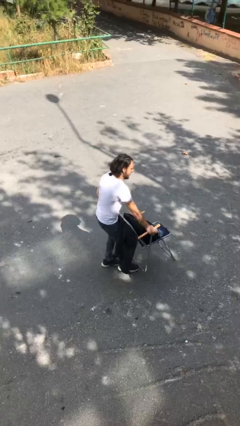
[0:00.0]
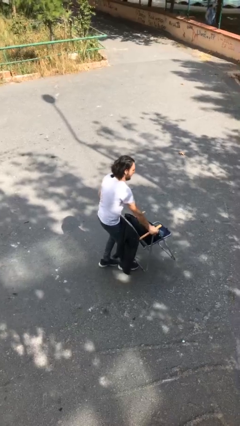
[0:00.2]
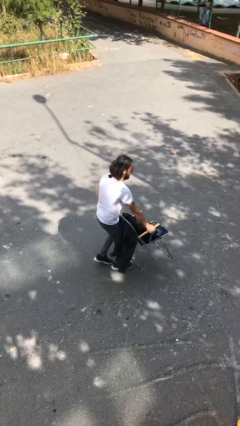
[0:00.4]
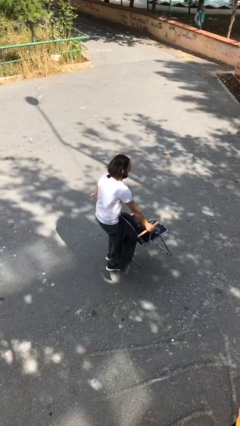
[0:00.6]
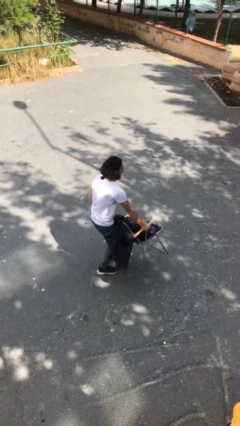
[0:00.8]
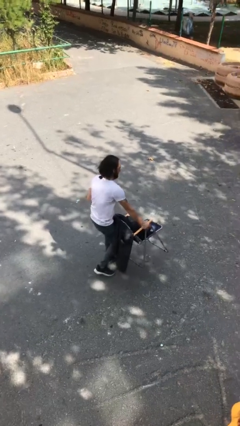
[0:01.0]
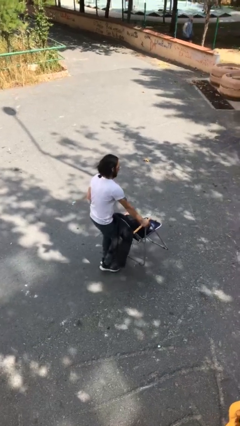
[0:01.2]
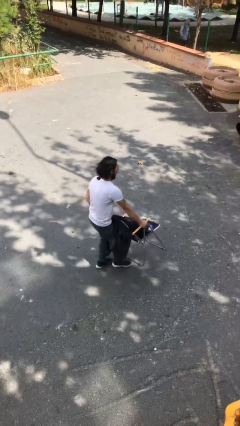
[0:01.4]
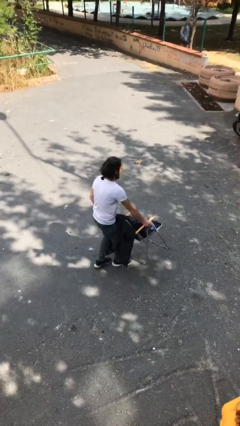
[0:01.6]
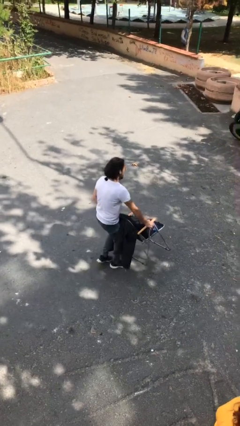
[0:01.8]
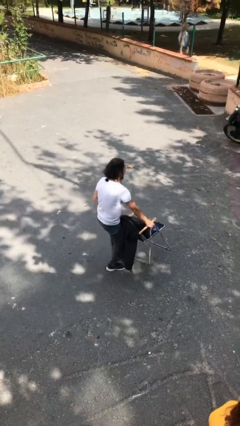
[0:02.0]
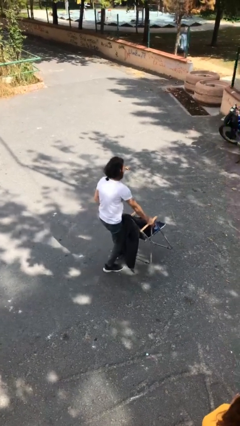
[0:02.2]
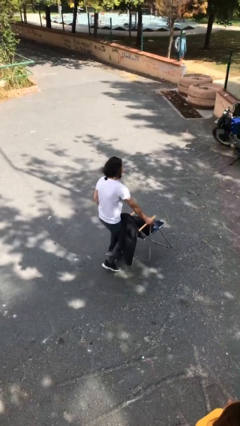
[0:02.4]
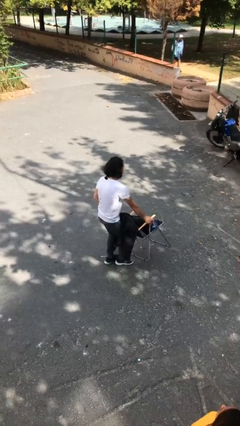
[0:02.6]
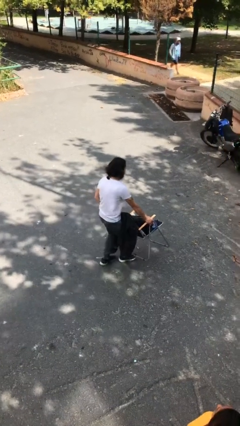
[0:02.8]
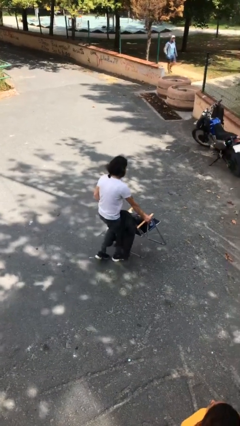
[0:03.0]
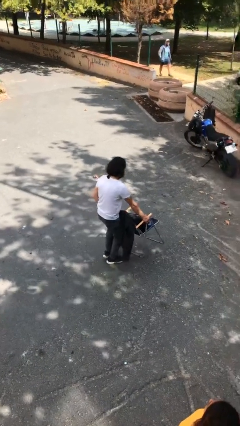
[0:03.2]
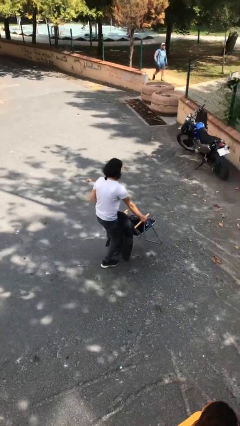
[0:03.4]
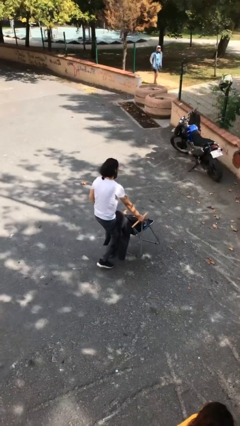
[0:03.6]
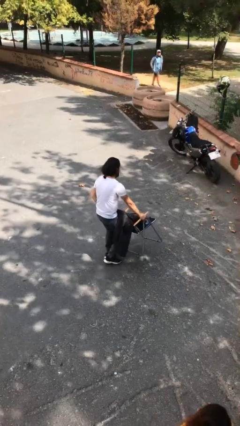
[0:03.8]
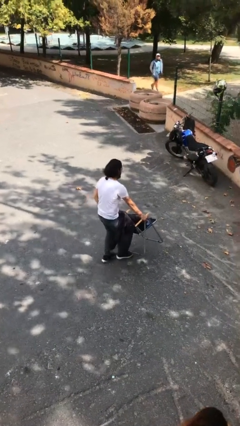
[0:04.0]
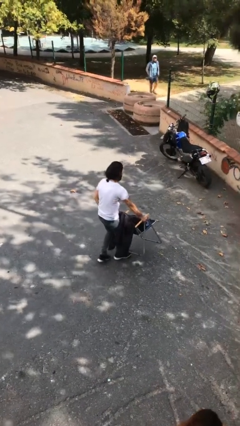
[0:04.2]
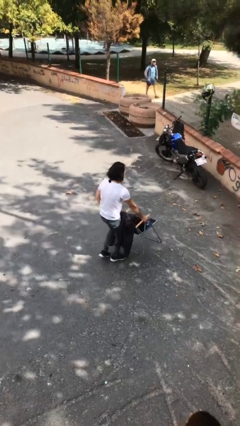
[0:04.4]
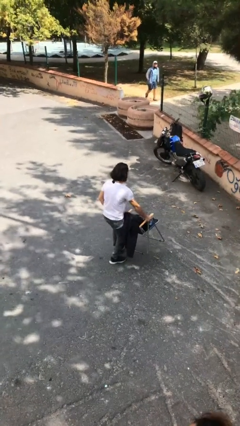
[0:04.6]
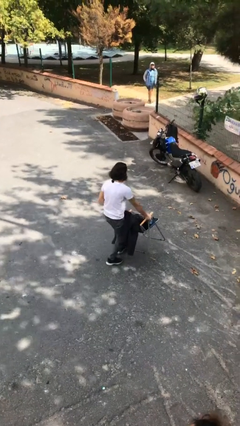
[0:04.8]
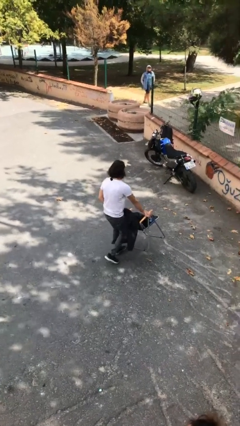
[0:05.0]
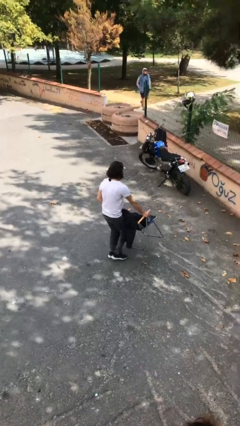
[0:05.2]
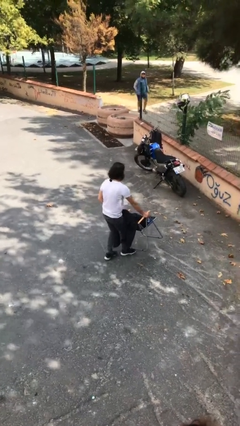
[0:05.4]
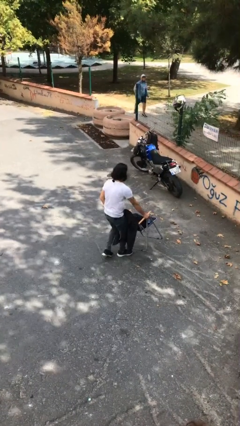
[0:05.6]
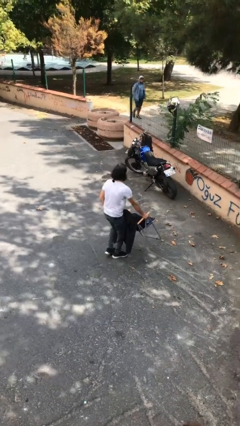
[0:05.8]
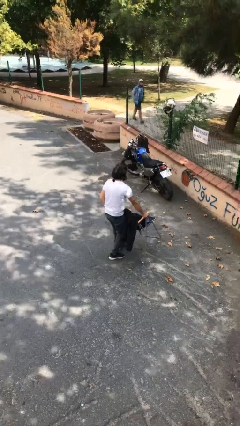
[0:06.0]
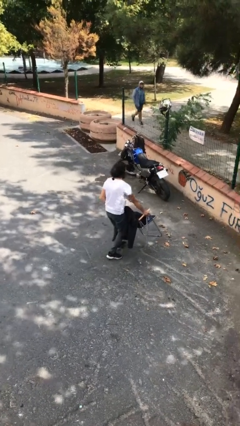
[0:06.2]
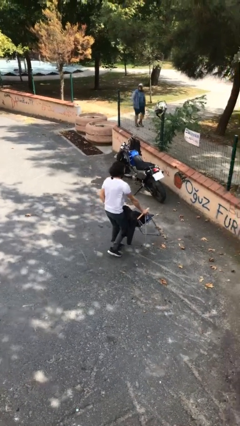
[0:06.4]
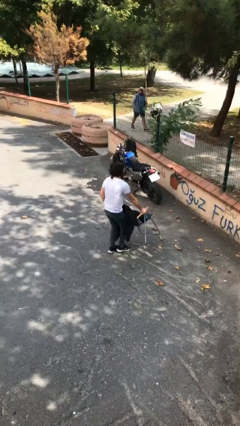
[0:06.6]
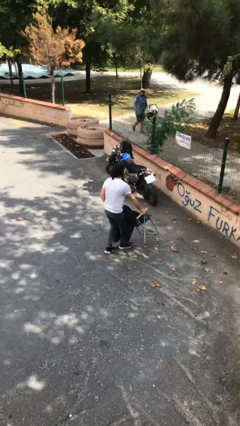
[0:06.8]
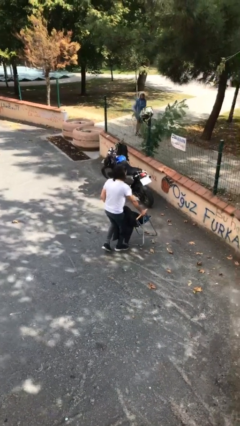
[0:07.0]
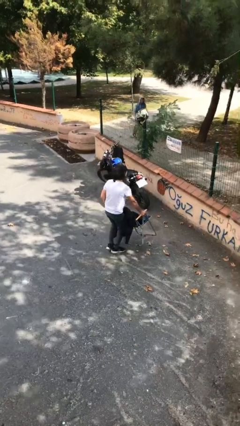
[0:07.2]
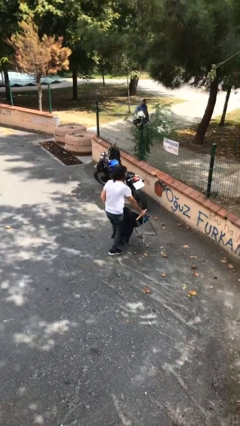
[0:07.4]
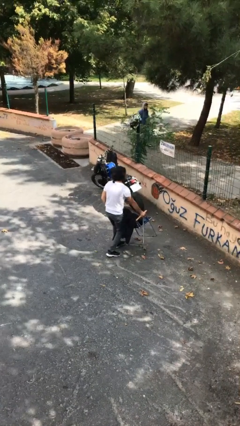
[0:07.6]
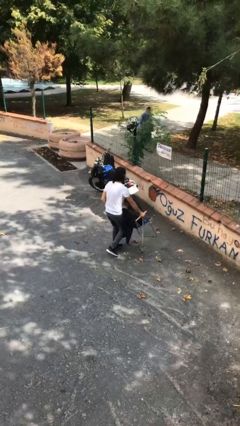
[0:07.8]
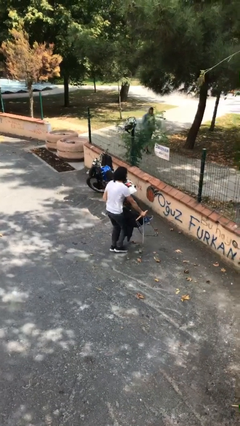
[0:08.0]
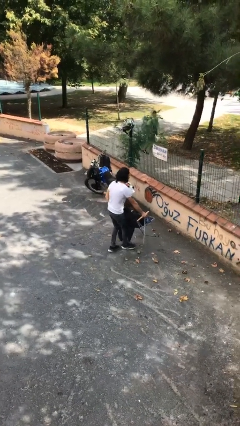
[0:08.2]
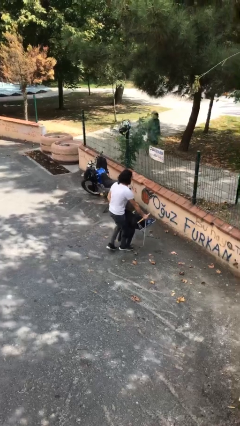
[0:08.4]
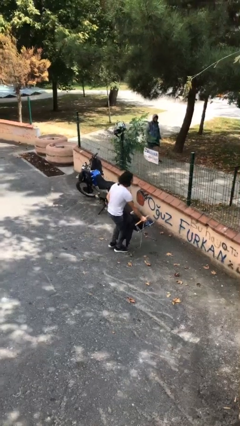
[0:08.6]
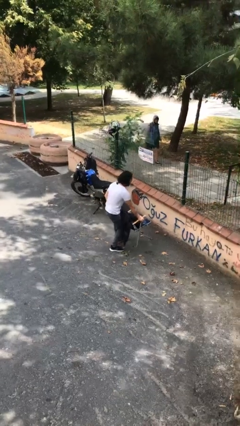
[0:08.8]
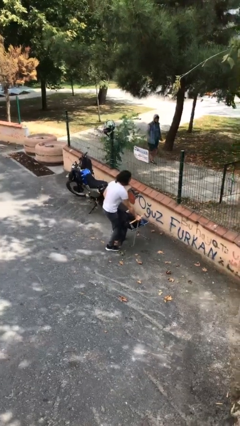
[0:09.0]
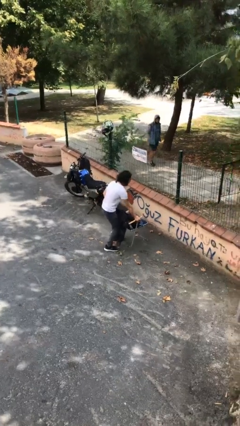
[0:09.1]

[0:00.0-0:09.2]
person carries heavy object

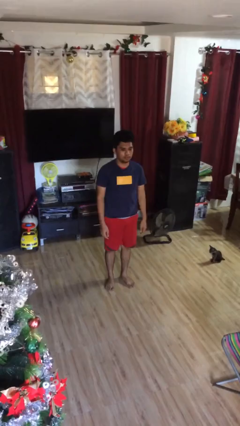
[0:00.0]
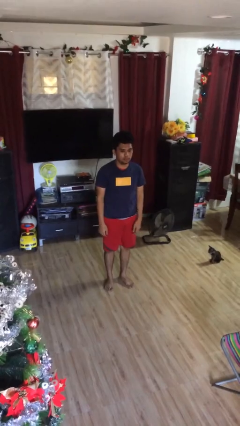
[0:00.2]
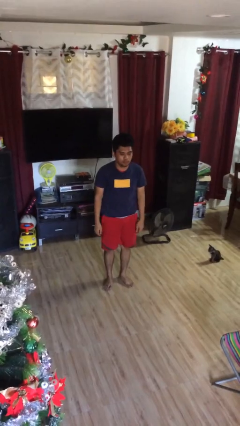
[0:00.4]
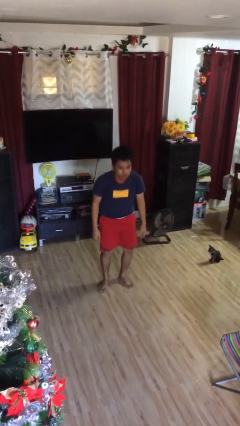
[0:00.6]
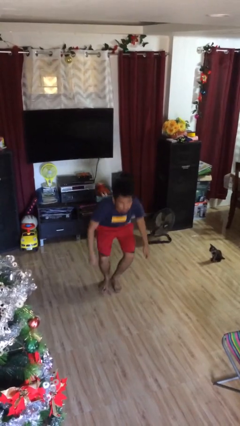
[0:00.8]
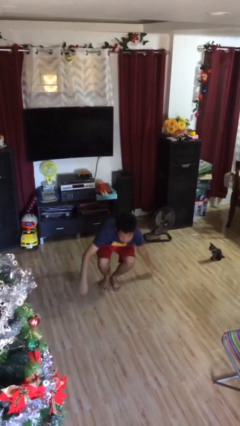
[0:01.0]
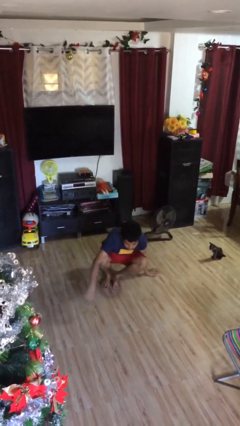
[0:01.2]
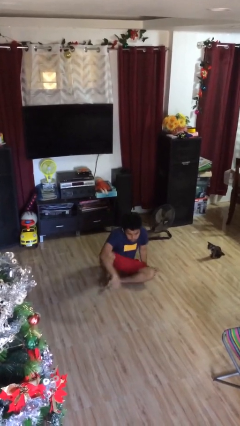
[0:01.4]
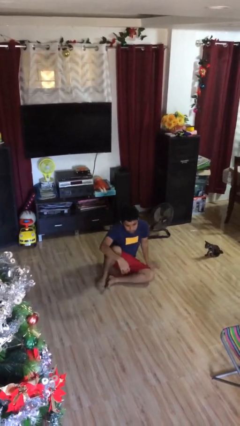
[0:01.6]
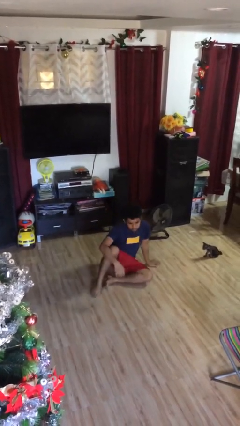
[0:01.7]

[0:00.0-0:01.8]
person sits down

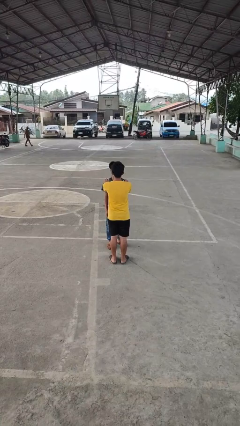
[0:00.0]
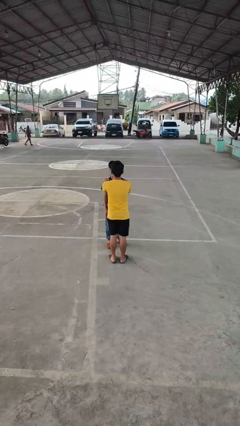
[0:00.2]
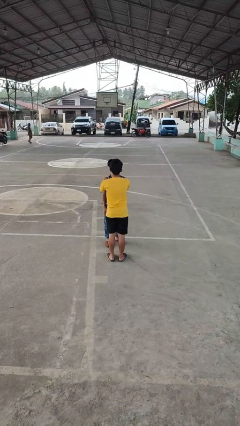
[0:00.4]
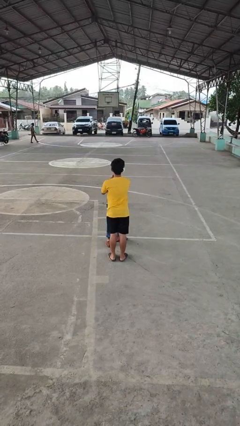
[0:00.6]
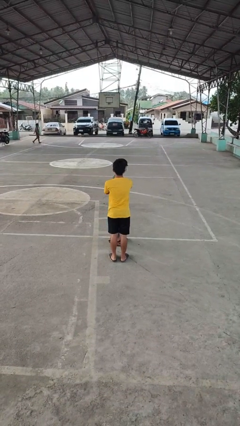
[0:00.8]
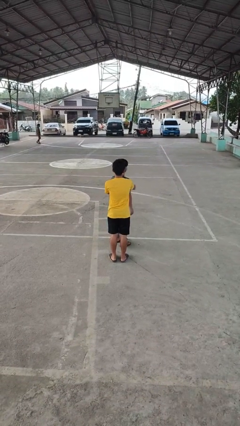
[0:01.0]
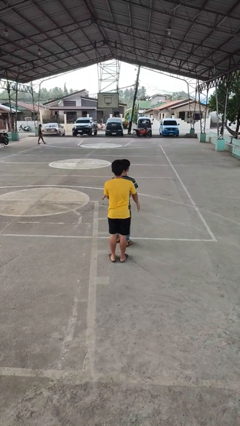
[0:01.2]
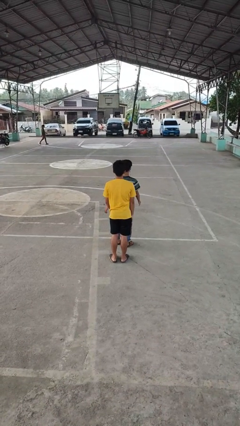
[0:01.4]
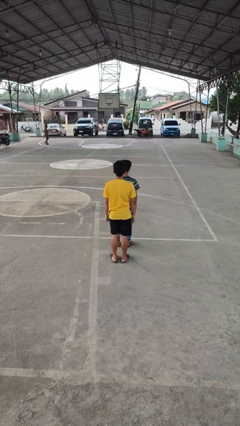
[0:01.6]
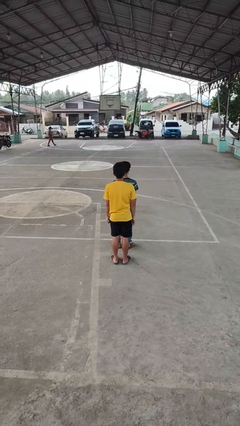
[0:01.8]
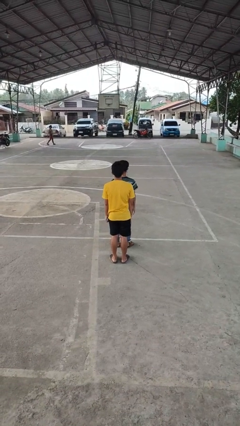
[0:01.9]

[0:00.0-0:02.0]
person spins person around

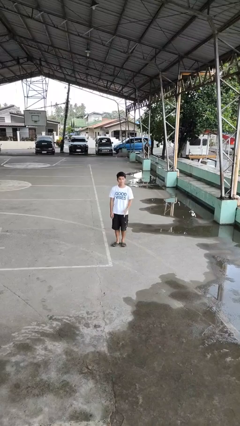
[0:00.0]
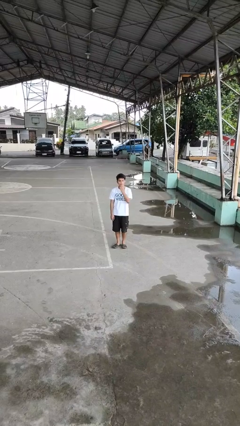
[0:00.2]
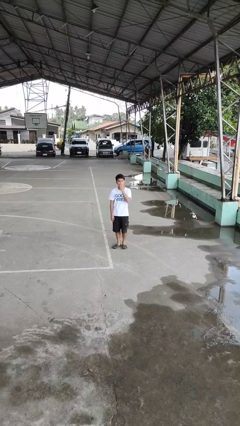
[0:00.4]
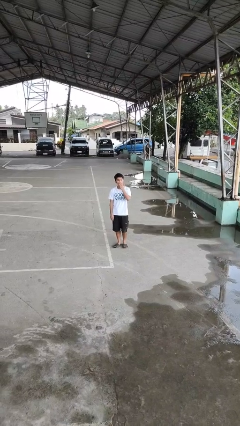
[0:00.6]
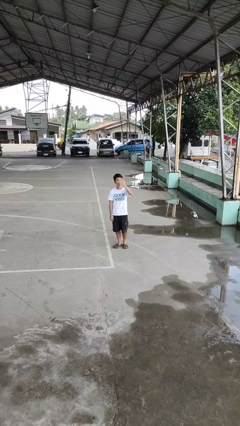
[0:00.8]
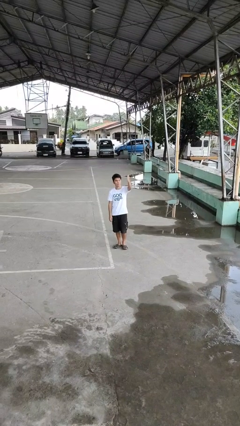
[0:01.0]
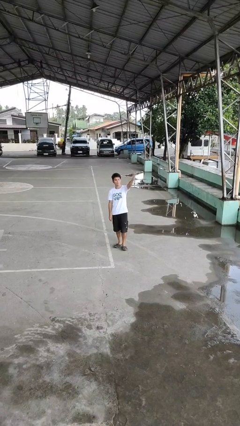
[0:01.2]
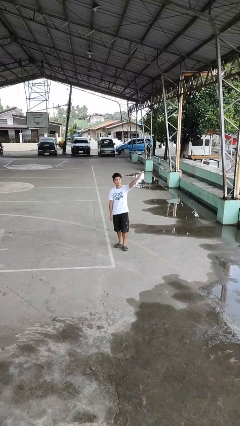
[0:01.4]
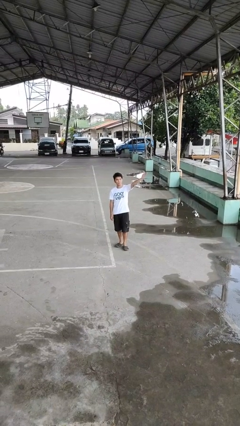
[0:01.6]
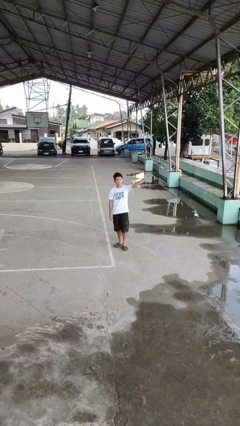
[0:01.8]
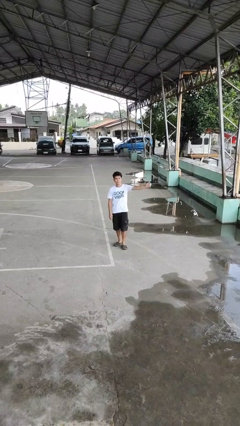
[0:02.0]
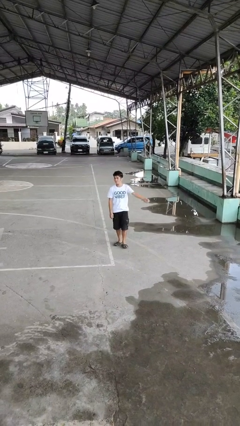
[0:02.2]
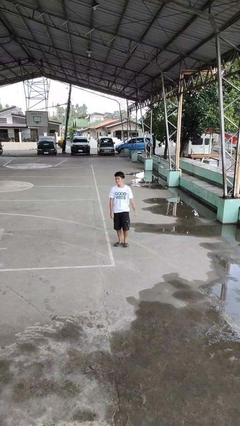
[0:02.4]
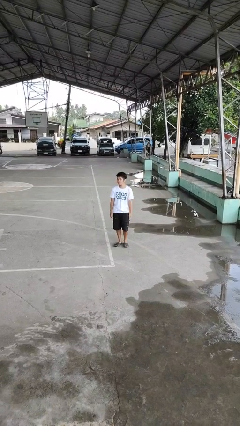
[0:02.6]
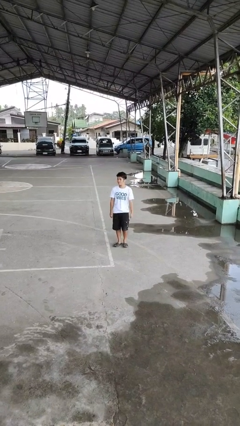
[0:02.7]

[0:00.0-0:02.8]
person gestures blow kiss

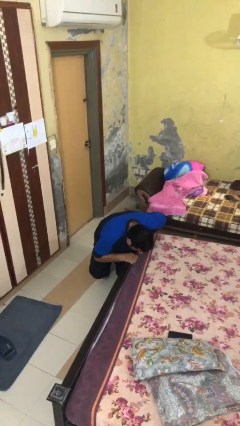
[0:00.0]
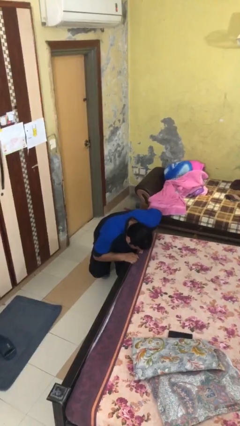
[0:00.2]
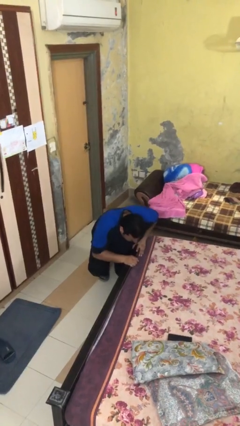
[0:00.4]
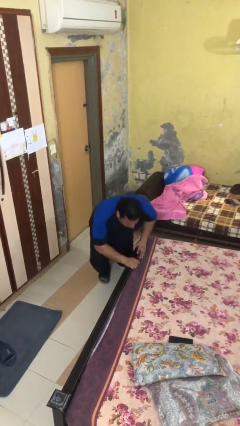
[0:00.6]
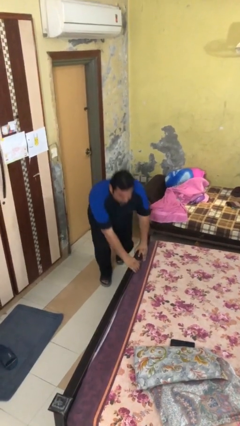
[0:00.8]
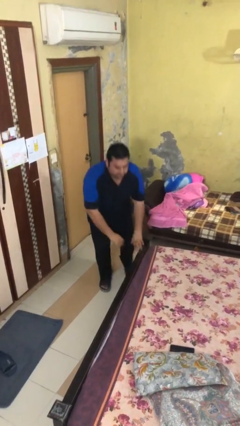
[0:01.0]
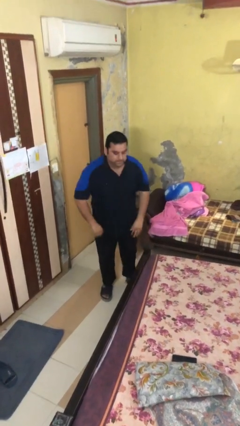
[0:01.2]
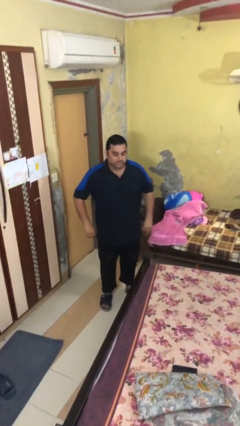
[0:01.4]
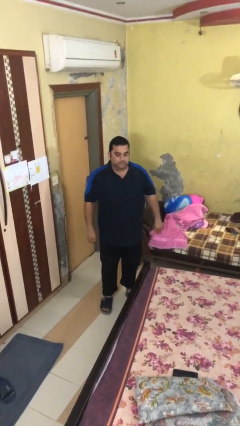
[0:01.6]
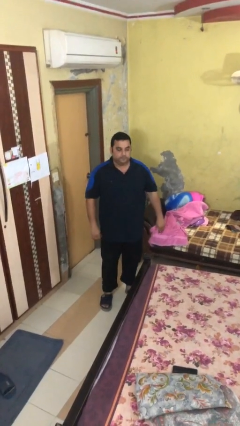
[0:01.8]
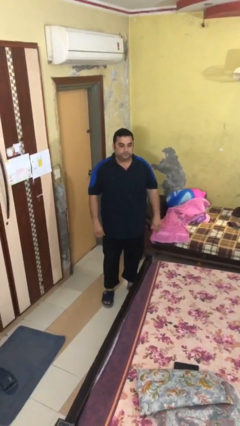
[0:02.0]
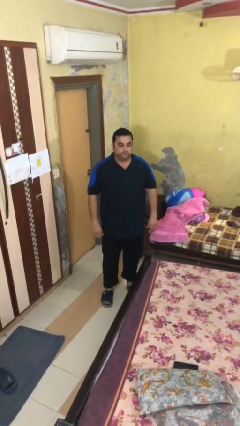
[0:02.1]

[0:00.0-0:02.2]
person stands up from floor
